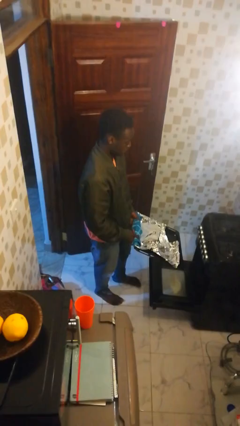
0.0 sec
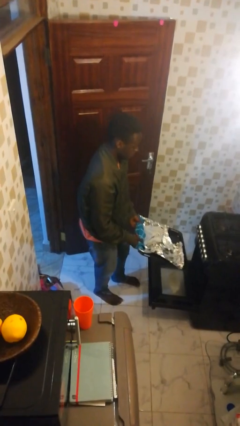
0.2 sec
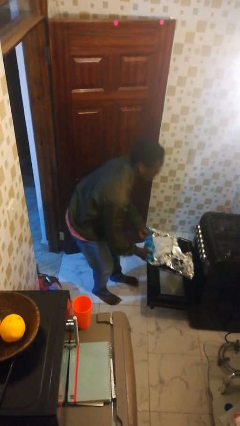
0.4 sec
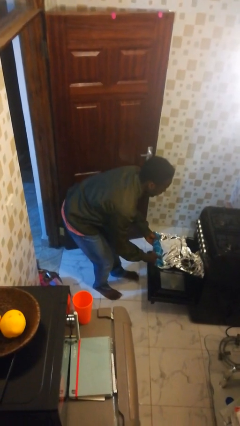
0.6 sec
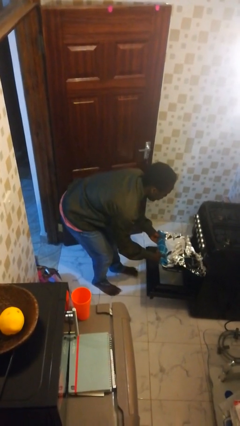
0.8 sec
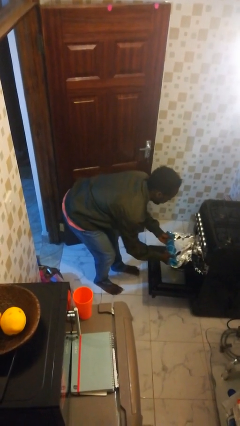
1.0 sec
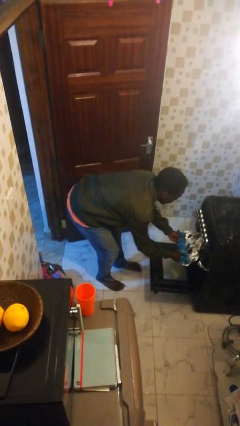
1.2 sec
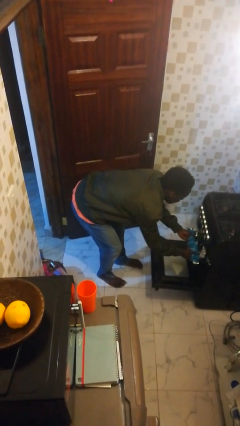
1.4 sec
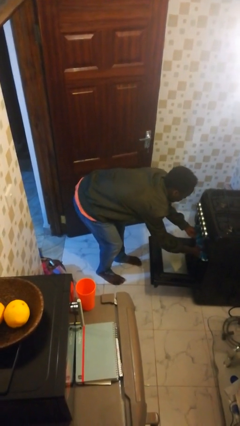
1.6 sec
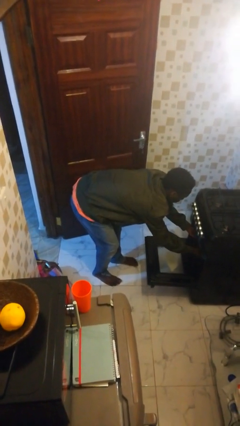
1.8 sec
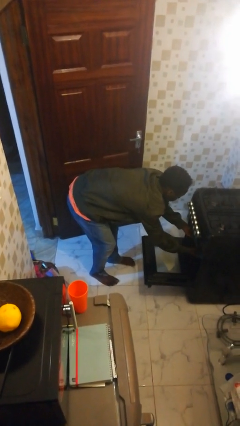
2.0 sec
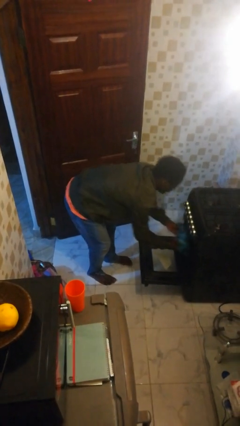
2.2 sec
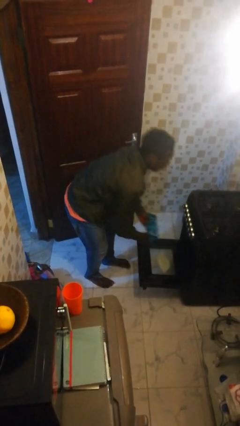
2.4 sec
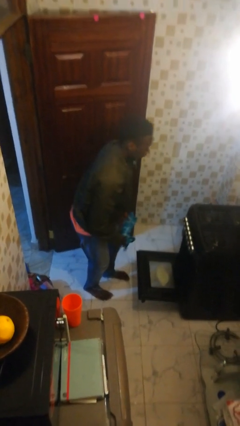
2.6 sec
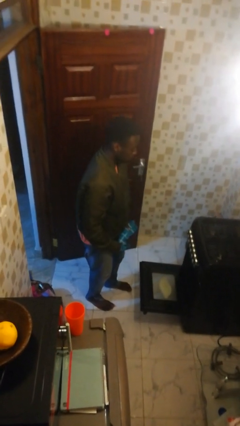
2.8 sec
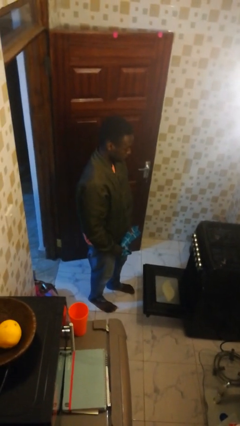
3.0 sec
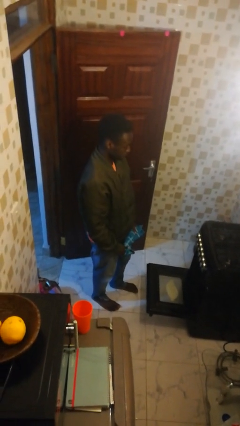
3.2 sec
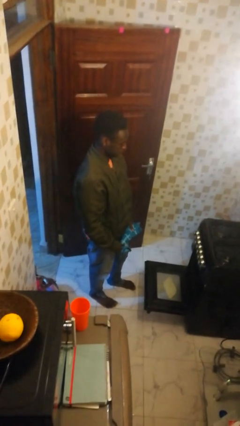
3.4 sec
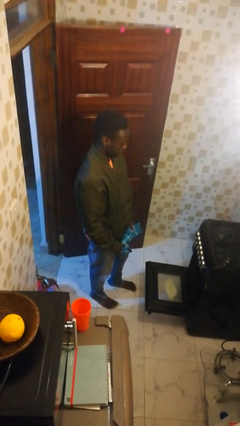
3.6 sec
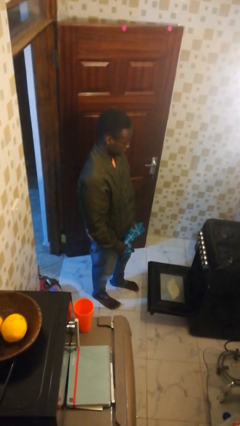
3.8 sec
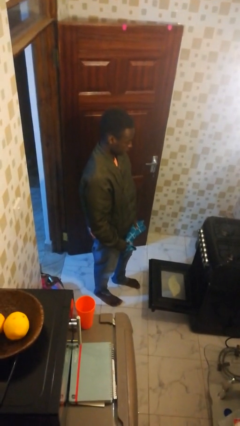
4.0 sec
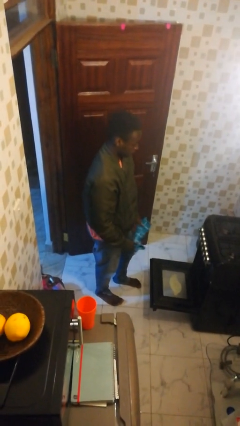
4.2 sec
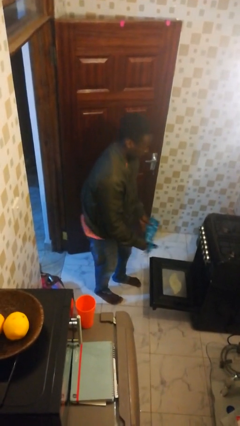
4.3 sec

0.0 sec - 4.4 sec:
person puts object into oven

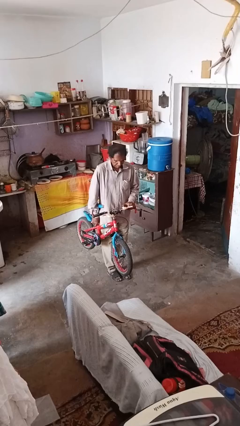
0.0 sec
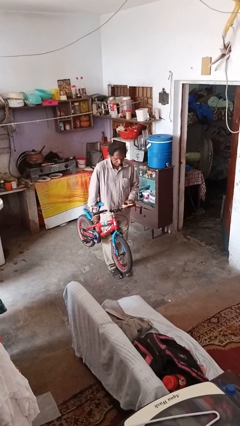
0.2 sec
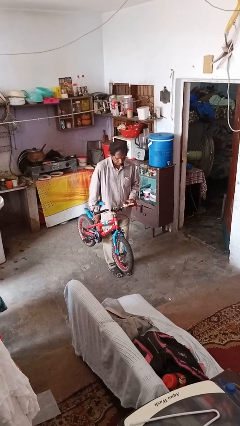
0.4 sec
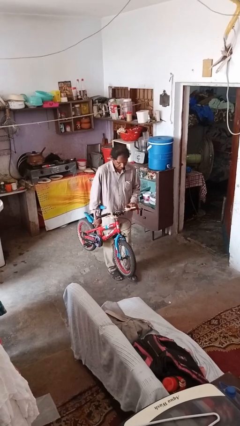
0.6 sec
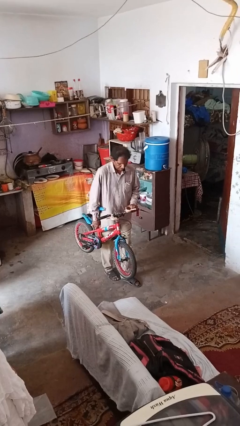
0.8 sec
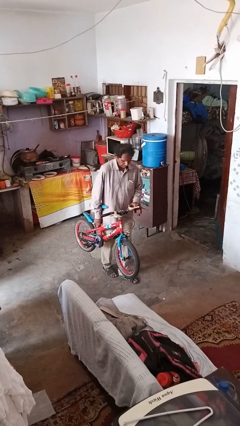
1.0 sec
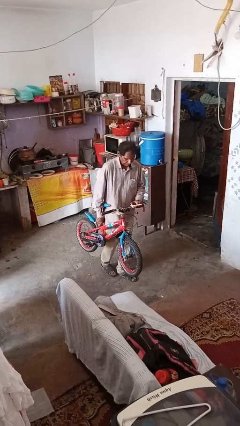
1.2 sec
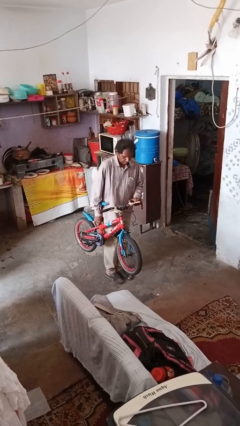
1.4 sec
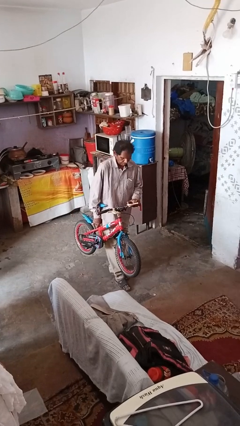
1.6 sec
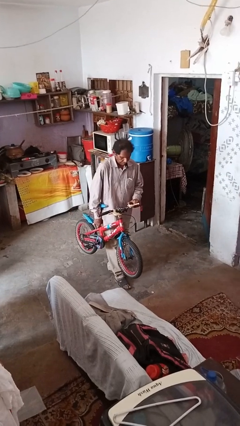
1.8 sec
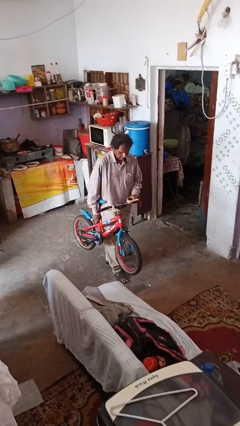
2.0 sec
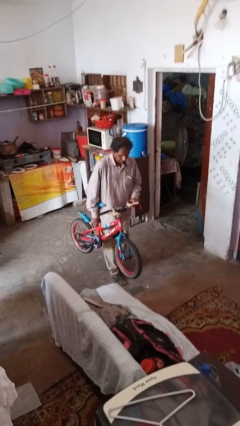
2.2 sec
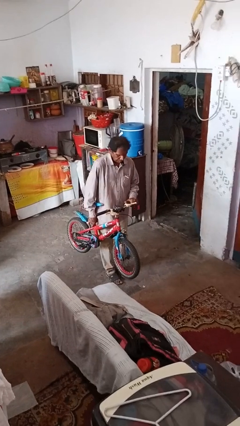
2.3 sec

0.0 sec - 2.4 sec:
person carries bicycle

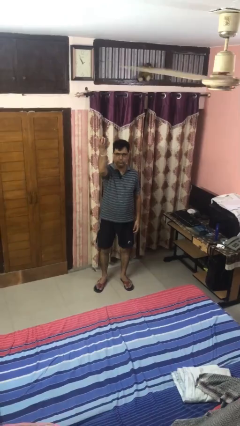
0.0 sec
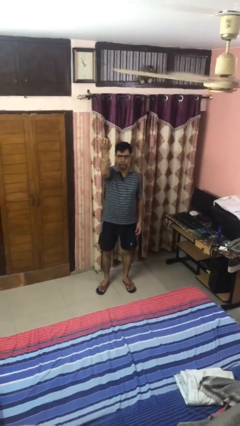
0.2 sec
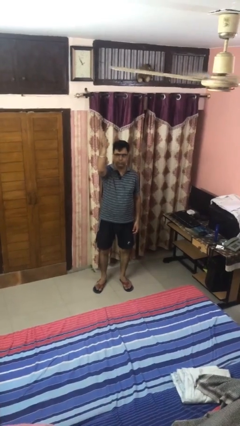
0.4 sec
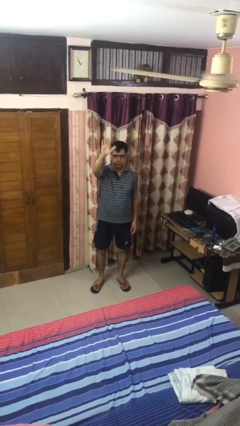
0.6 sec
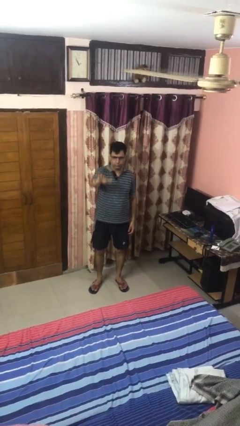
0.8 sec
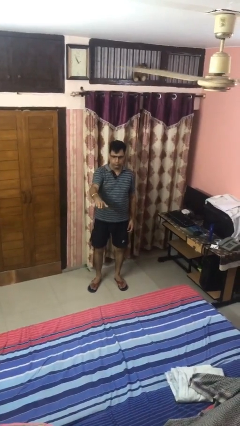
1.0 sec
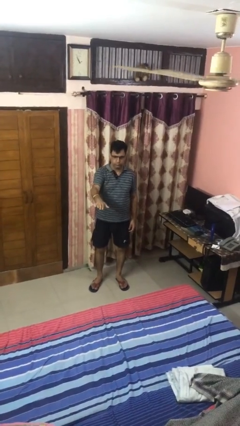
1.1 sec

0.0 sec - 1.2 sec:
person gestures swipe down

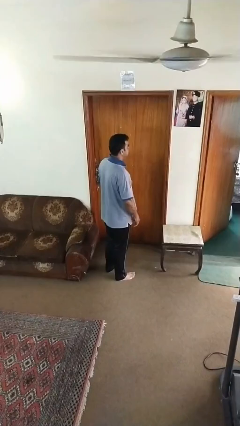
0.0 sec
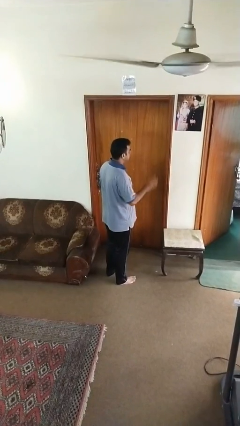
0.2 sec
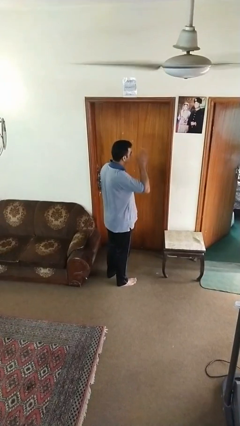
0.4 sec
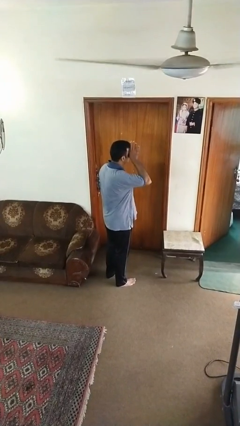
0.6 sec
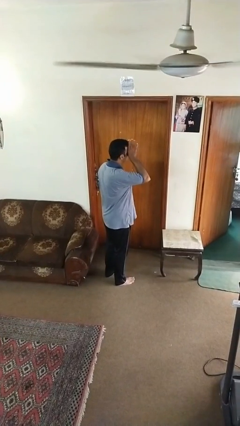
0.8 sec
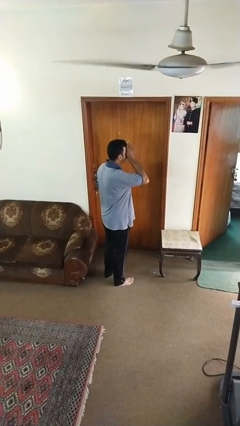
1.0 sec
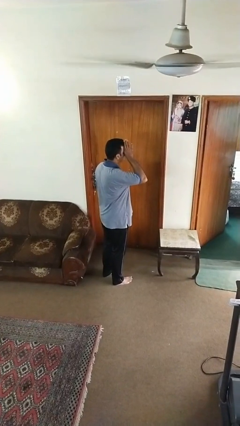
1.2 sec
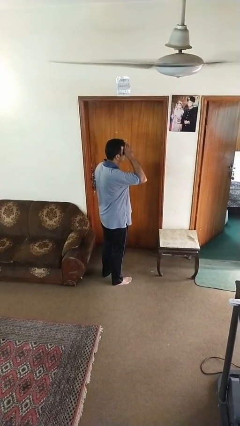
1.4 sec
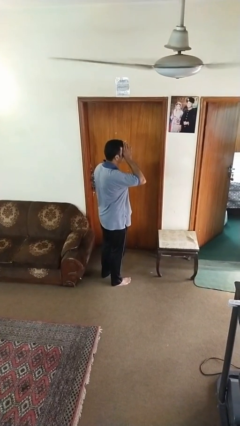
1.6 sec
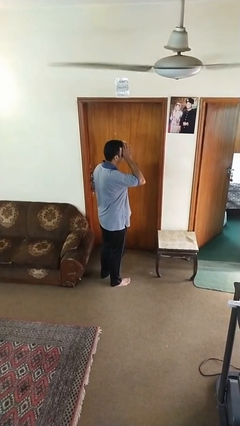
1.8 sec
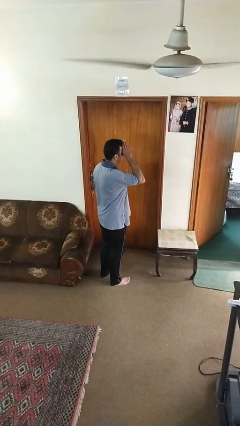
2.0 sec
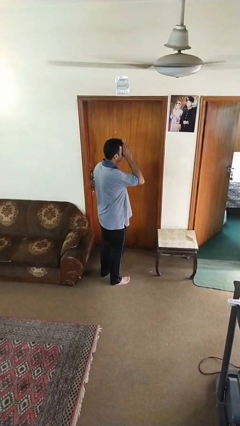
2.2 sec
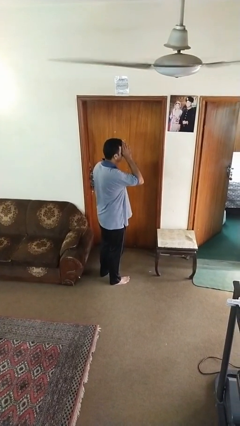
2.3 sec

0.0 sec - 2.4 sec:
person rubs eyes

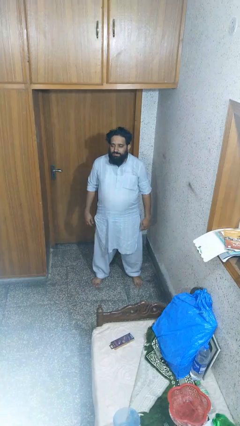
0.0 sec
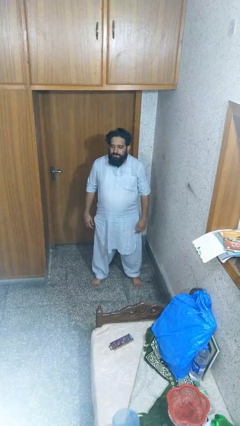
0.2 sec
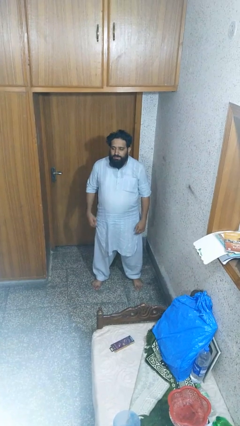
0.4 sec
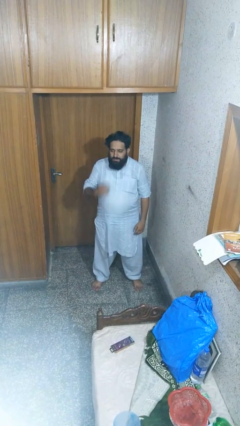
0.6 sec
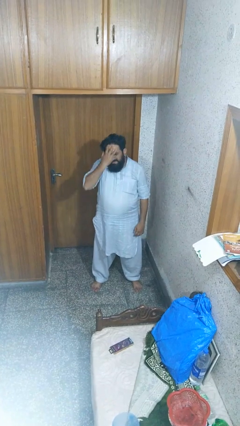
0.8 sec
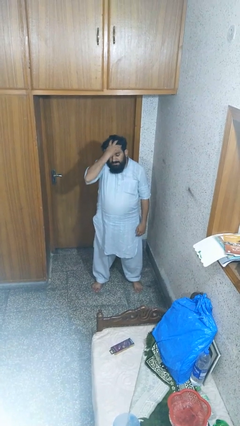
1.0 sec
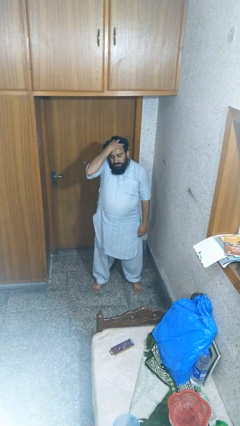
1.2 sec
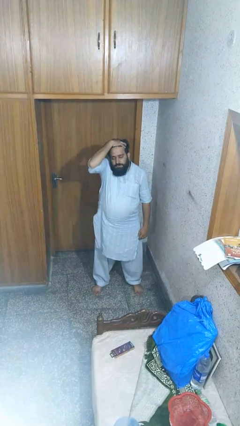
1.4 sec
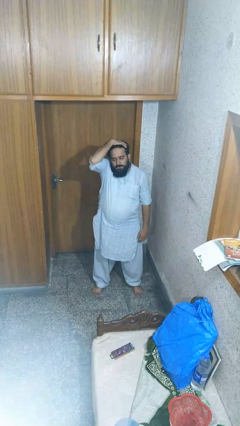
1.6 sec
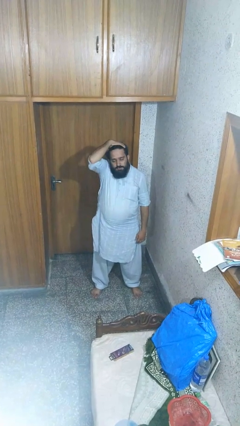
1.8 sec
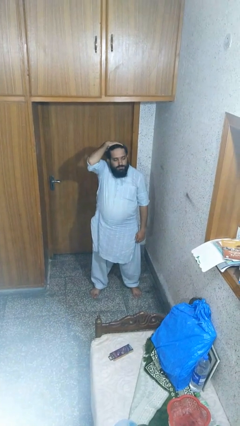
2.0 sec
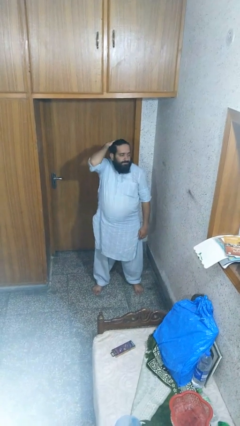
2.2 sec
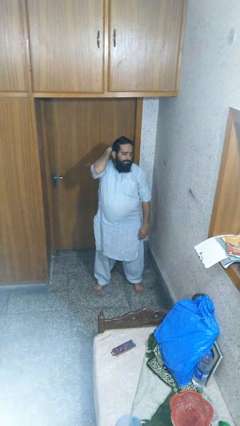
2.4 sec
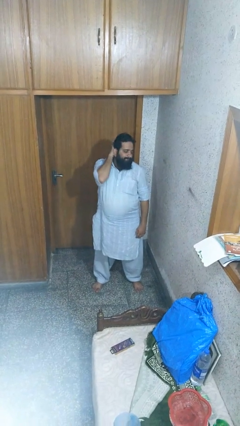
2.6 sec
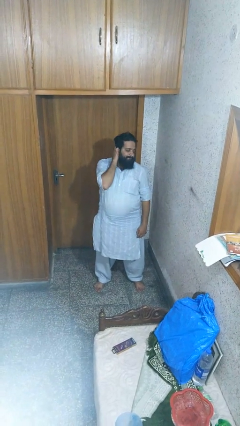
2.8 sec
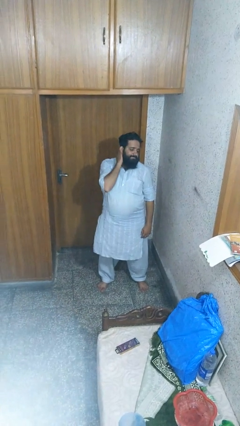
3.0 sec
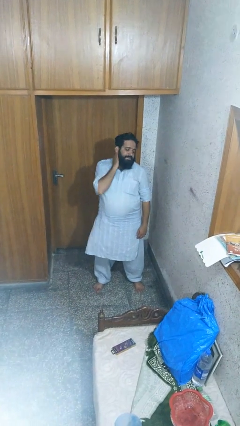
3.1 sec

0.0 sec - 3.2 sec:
person scratches face

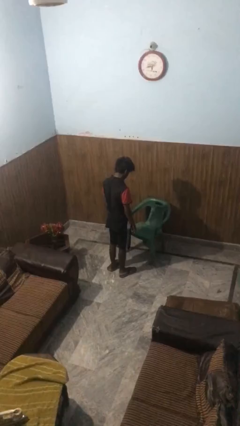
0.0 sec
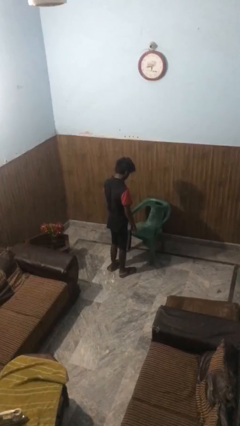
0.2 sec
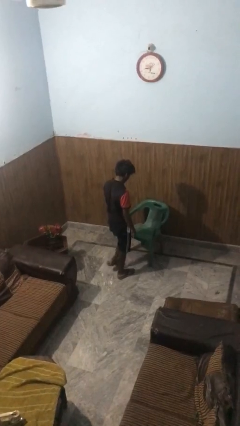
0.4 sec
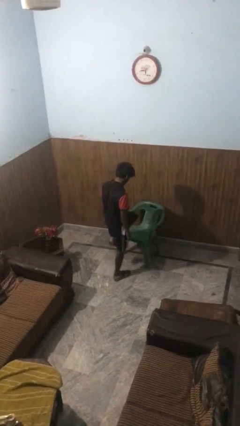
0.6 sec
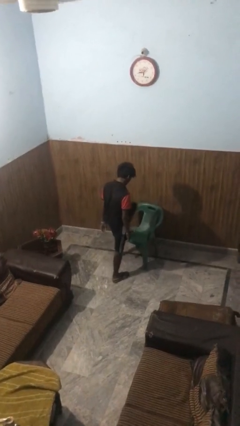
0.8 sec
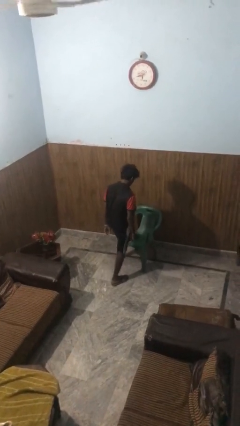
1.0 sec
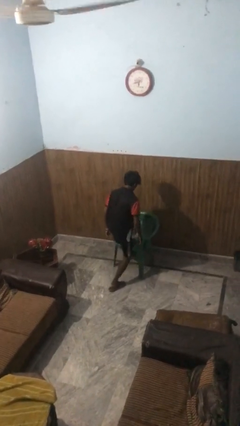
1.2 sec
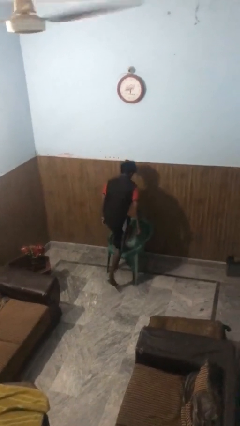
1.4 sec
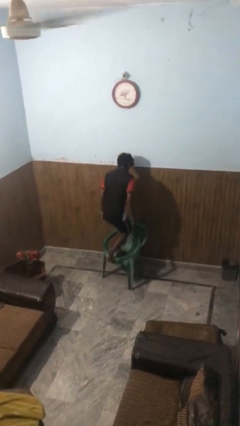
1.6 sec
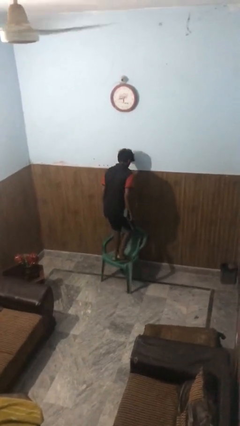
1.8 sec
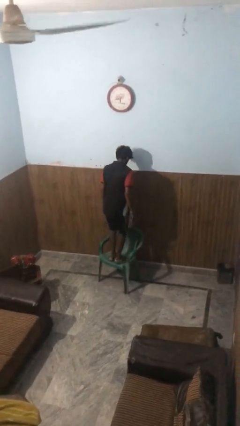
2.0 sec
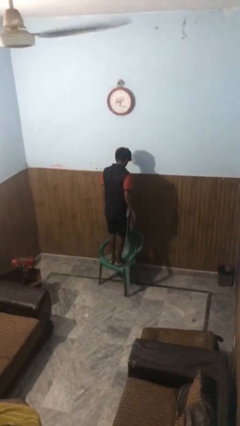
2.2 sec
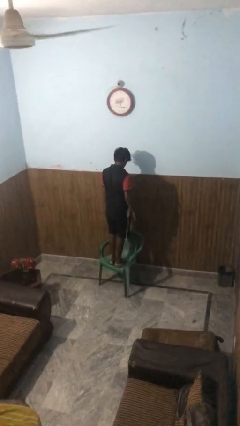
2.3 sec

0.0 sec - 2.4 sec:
person climbs on chair

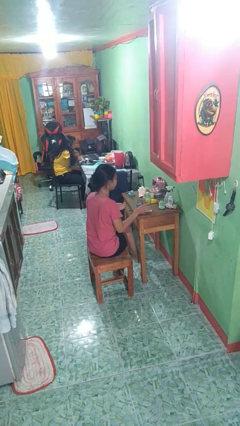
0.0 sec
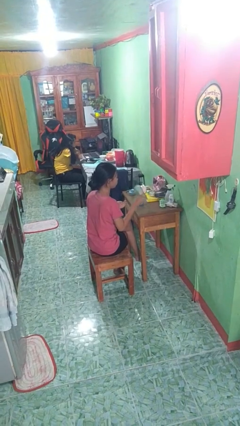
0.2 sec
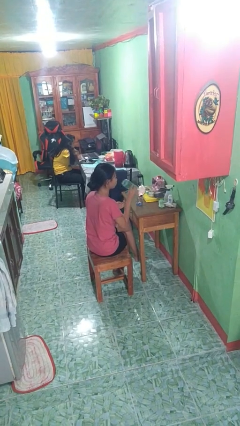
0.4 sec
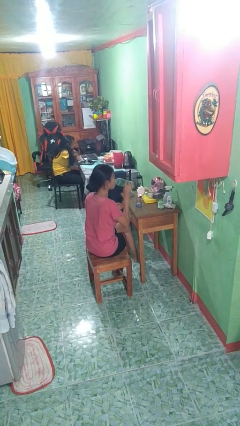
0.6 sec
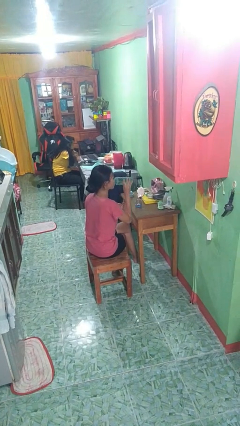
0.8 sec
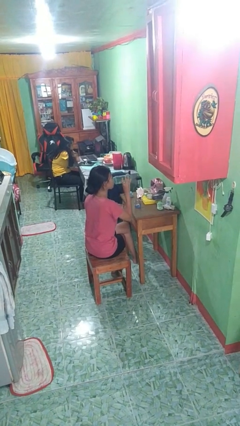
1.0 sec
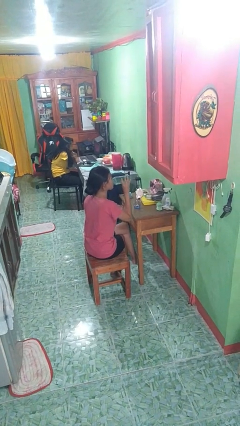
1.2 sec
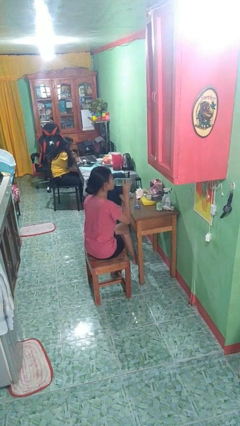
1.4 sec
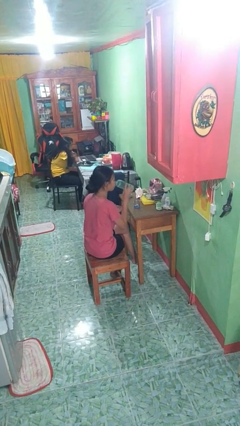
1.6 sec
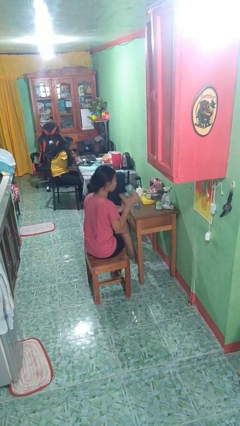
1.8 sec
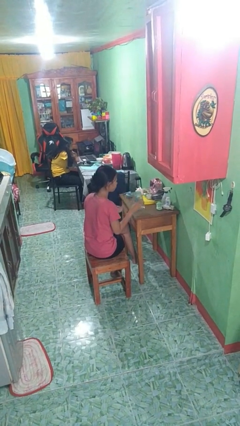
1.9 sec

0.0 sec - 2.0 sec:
person drinks from cup
